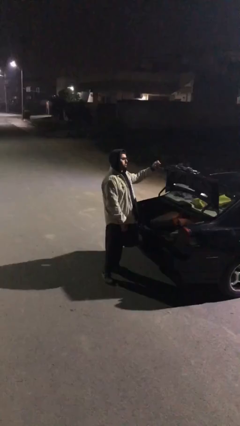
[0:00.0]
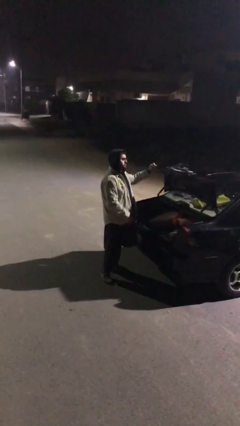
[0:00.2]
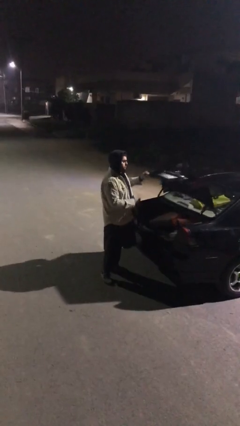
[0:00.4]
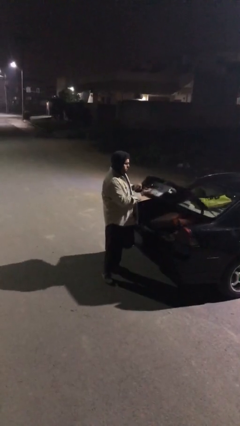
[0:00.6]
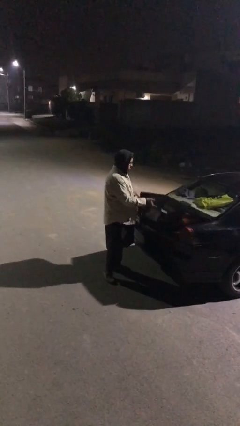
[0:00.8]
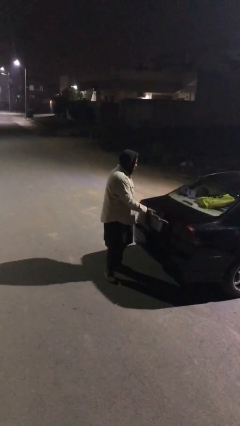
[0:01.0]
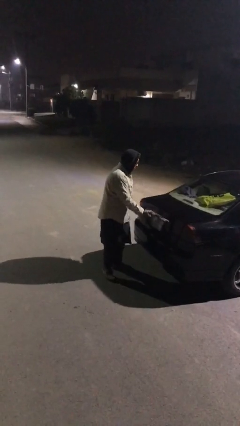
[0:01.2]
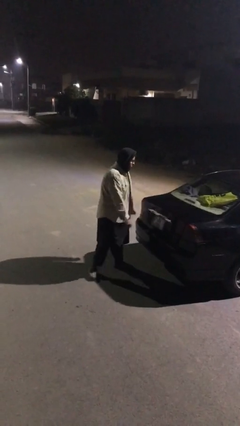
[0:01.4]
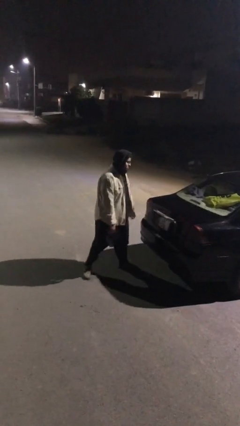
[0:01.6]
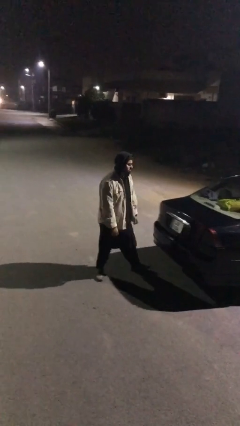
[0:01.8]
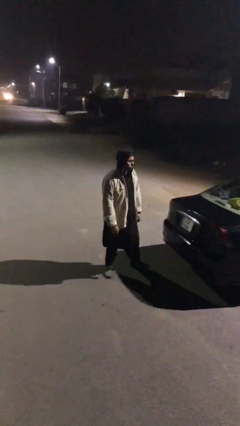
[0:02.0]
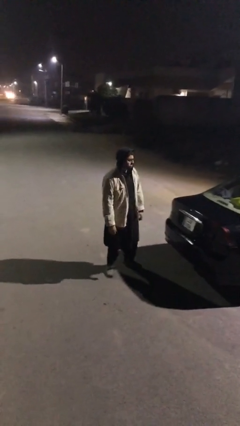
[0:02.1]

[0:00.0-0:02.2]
person closes car trunk

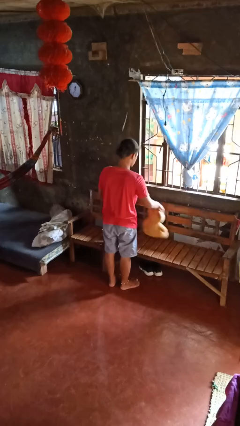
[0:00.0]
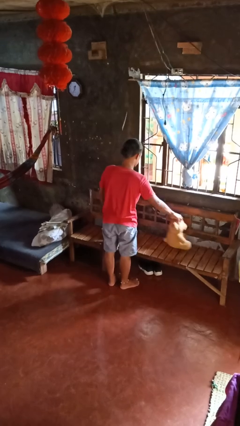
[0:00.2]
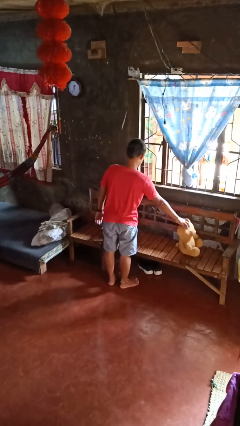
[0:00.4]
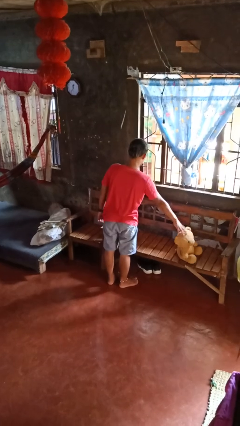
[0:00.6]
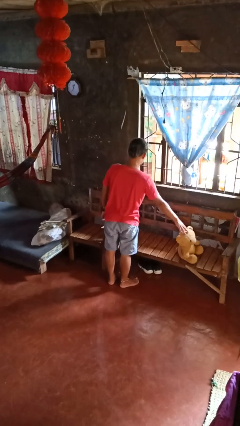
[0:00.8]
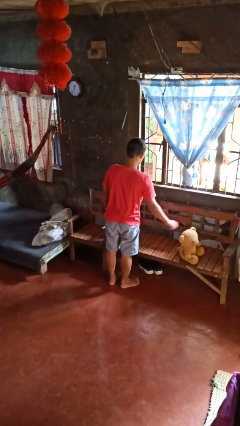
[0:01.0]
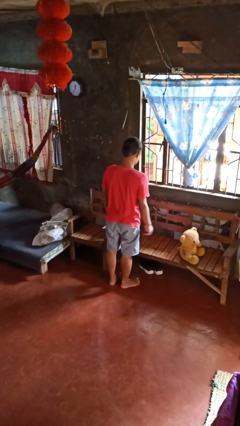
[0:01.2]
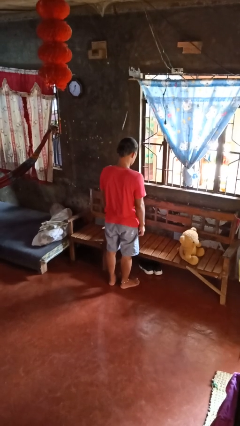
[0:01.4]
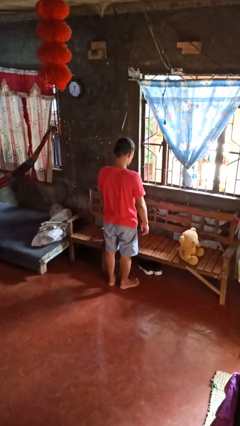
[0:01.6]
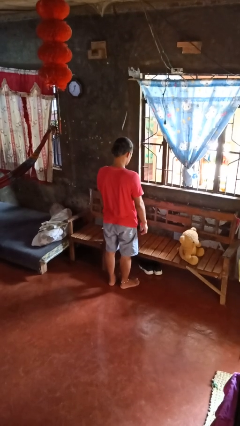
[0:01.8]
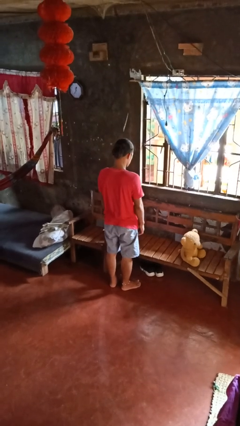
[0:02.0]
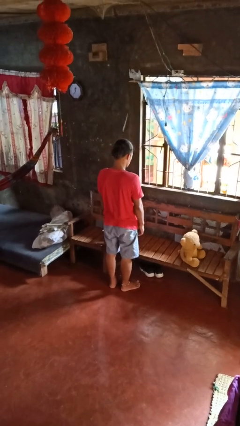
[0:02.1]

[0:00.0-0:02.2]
person puts down object on couch

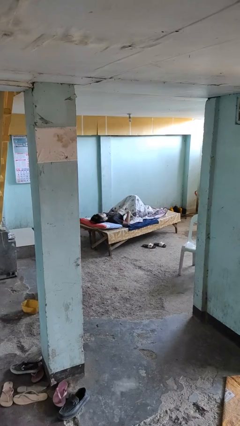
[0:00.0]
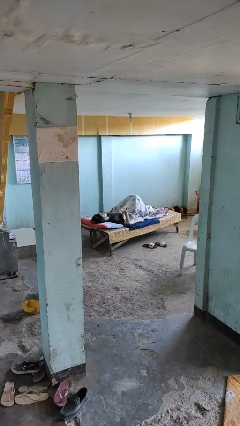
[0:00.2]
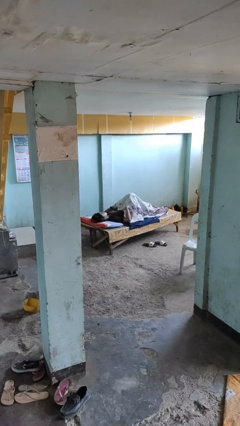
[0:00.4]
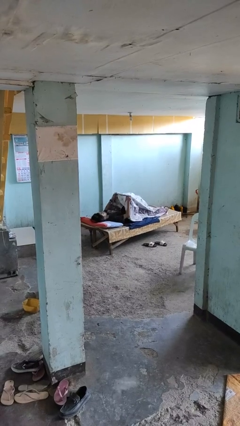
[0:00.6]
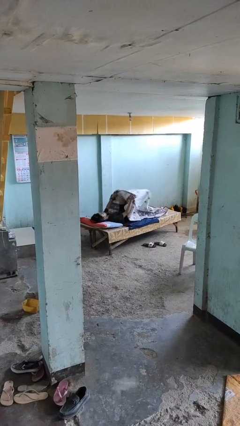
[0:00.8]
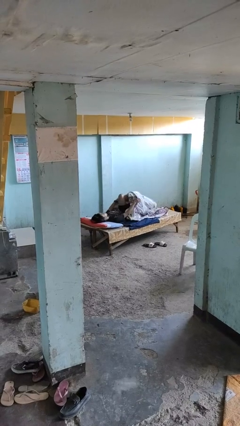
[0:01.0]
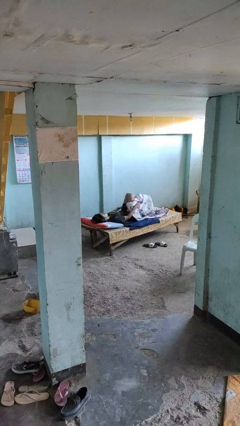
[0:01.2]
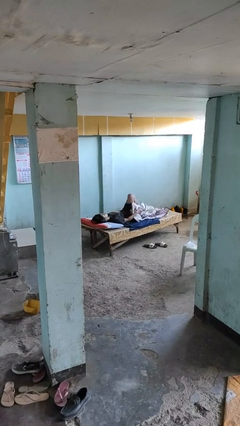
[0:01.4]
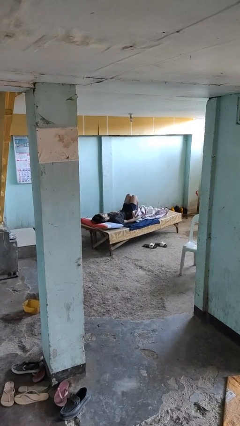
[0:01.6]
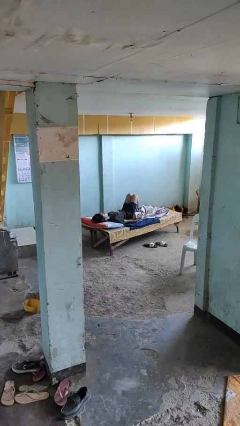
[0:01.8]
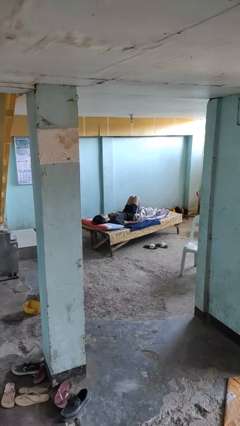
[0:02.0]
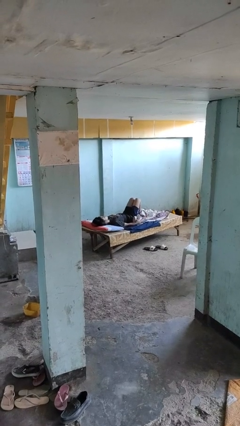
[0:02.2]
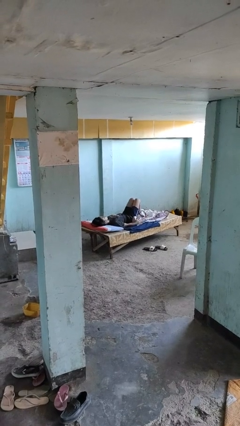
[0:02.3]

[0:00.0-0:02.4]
person uncovers with bedsheets

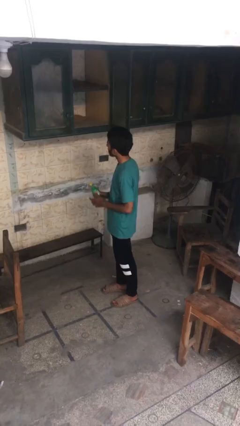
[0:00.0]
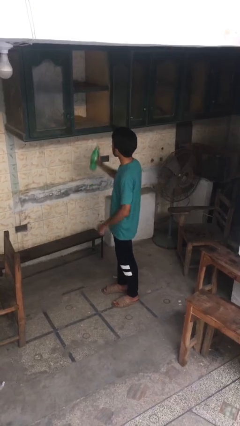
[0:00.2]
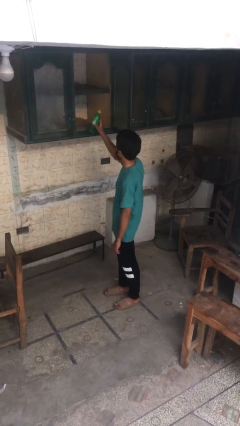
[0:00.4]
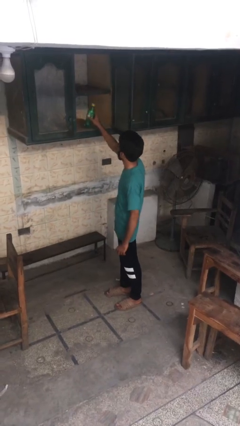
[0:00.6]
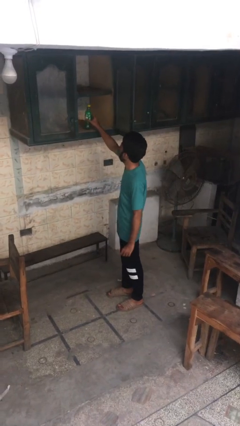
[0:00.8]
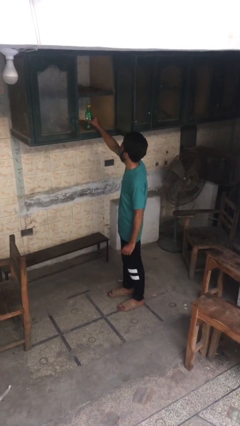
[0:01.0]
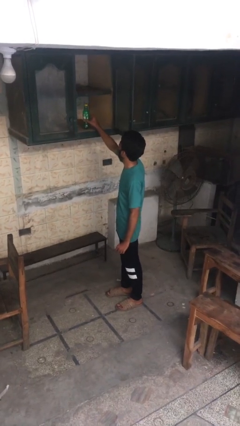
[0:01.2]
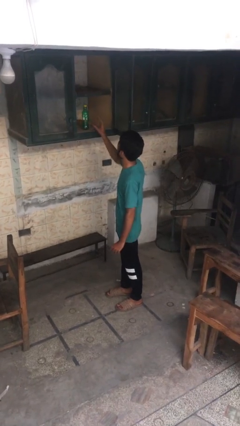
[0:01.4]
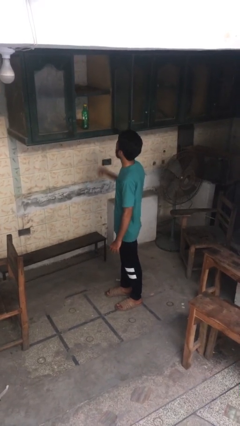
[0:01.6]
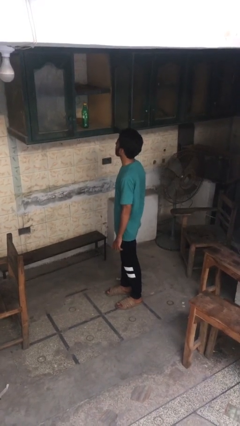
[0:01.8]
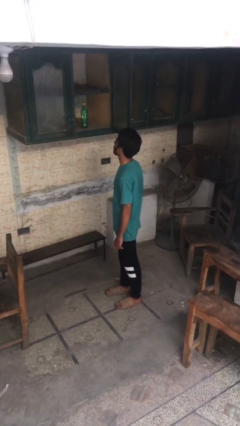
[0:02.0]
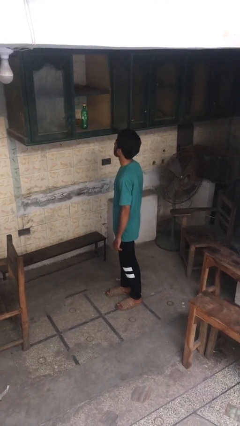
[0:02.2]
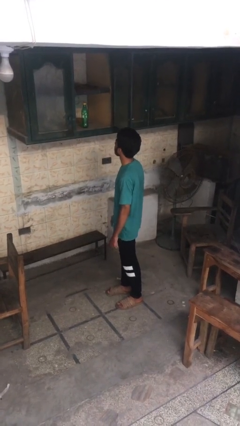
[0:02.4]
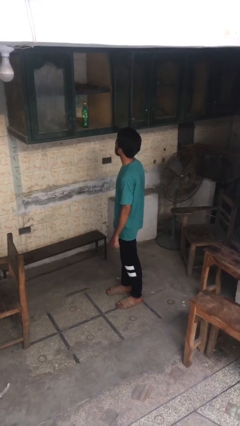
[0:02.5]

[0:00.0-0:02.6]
person puts object in cabinet

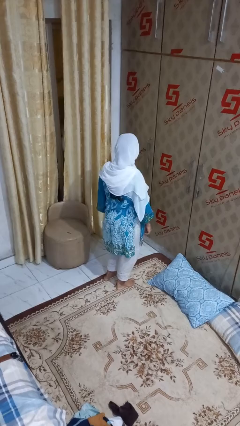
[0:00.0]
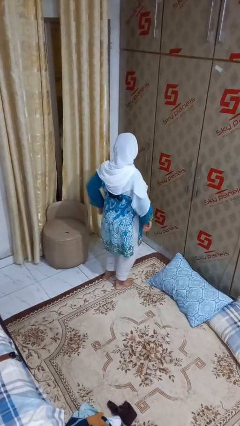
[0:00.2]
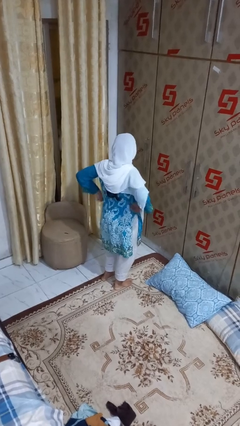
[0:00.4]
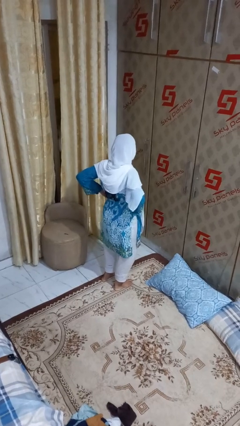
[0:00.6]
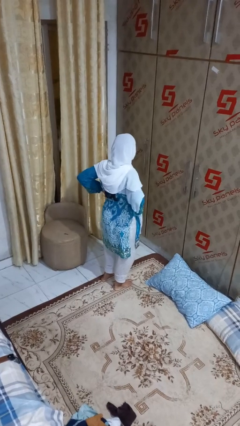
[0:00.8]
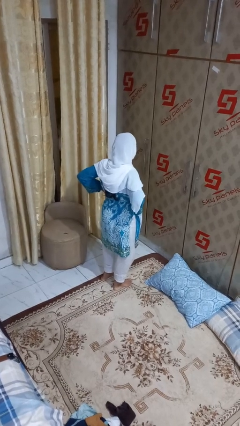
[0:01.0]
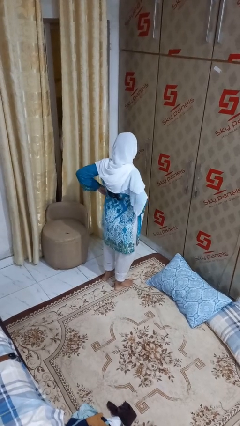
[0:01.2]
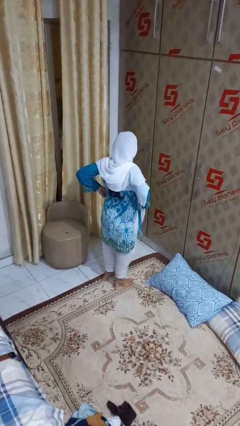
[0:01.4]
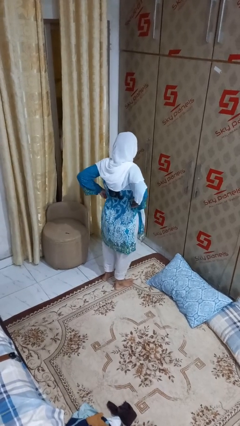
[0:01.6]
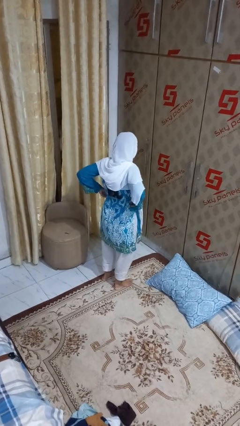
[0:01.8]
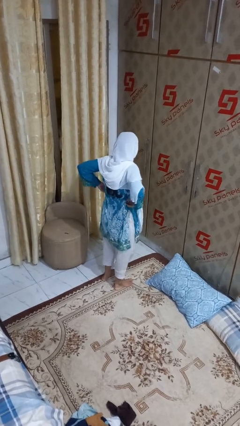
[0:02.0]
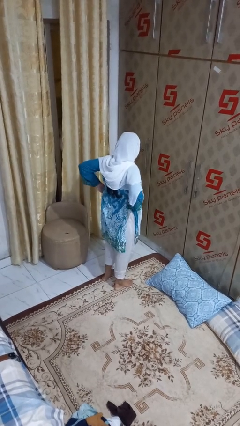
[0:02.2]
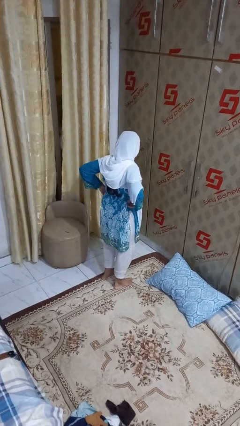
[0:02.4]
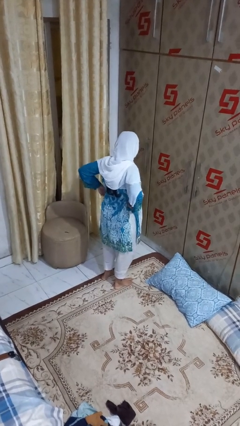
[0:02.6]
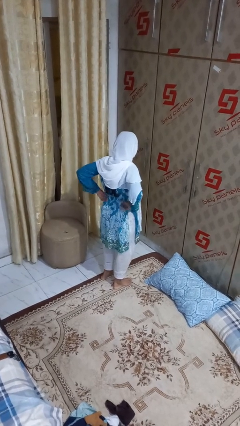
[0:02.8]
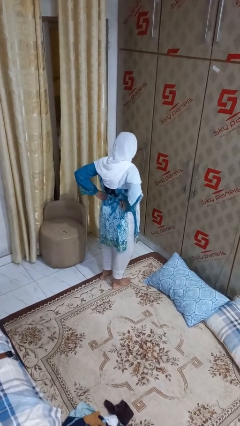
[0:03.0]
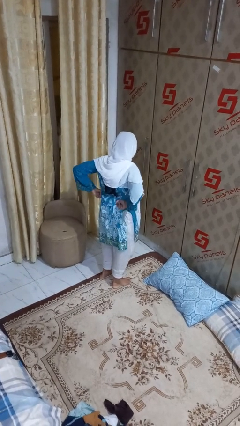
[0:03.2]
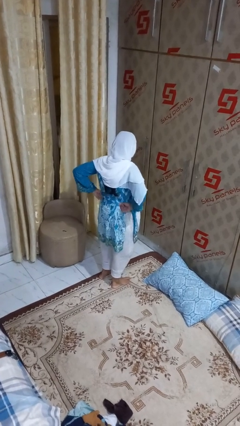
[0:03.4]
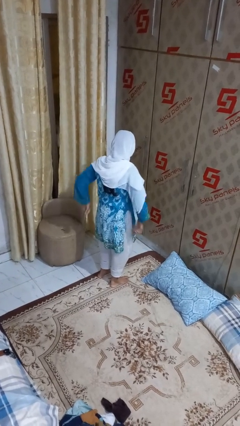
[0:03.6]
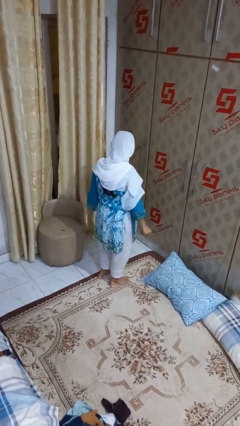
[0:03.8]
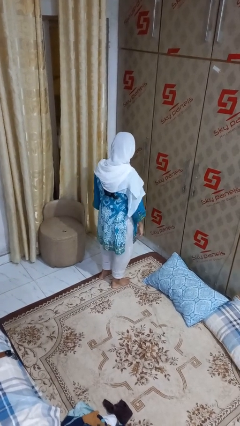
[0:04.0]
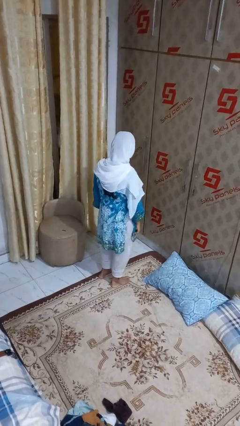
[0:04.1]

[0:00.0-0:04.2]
person hikes up pants

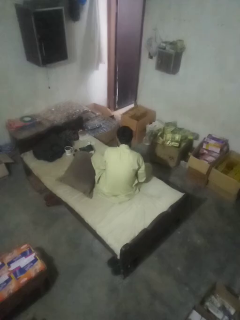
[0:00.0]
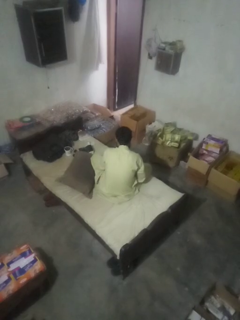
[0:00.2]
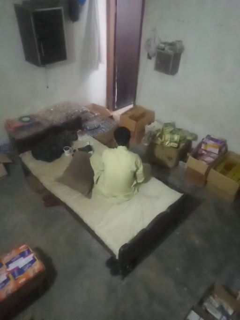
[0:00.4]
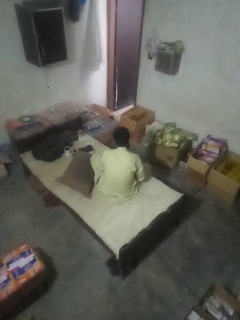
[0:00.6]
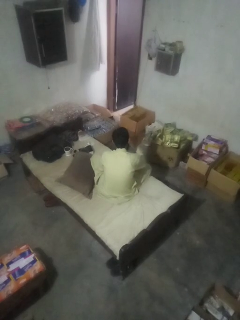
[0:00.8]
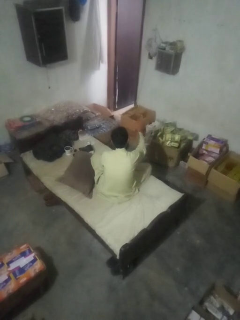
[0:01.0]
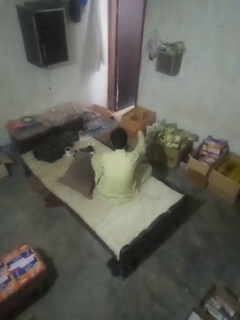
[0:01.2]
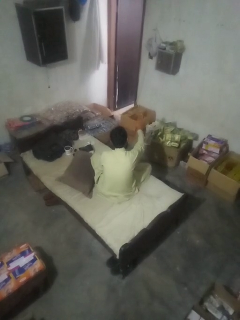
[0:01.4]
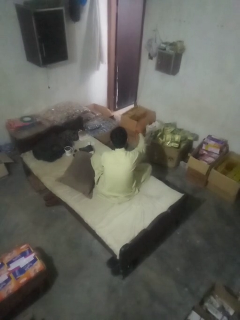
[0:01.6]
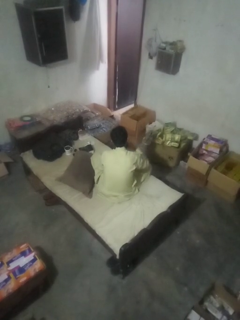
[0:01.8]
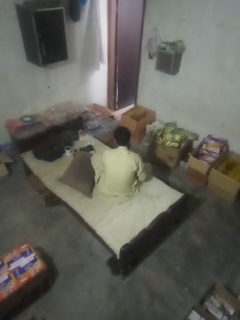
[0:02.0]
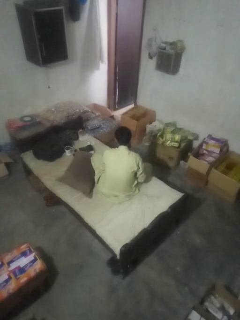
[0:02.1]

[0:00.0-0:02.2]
person gestures stop

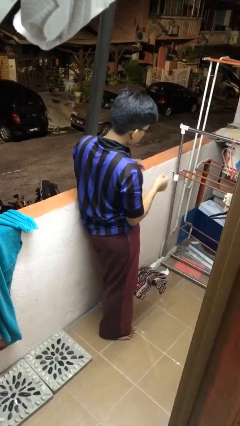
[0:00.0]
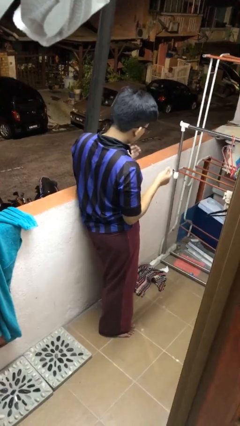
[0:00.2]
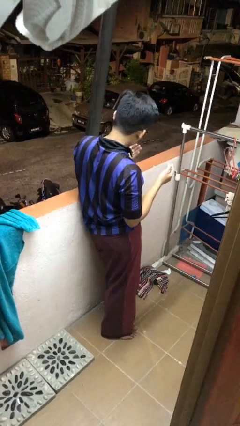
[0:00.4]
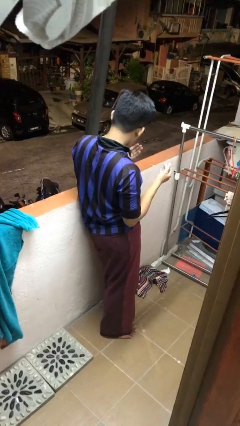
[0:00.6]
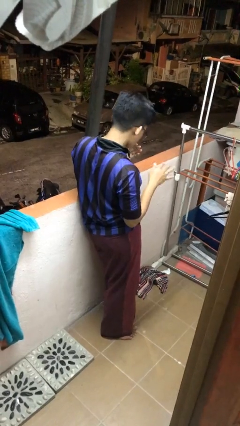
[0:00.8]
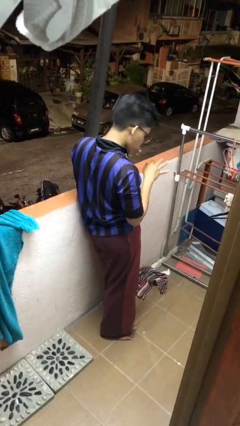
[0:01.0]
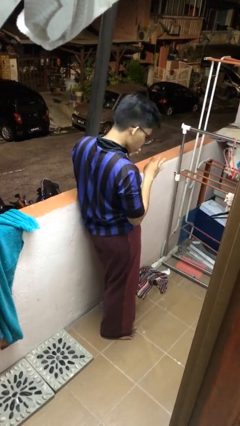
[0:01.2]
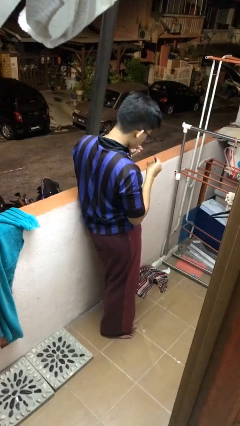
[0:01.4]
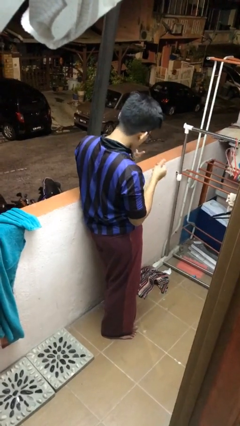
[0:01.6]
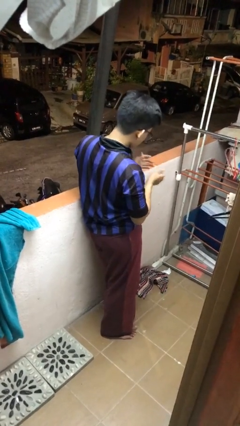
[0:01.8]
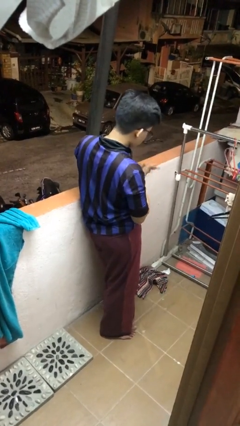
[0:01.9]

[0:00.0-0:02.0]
person blows into hands
